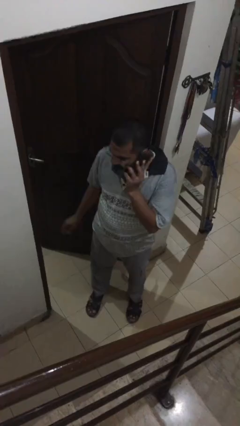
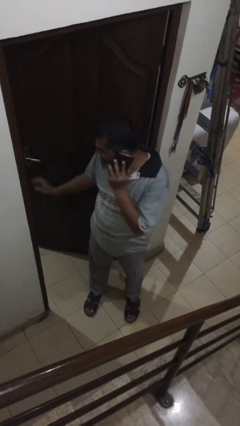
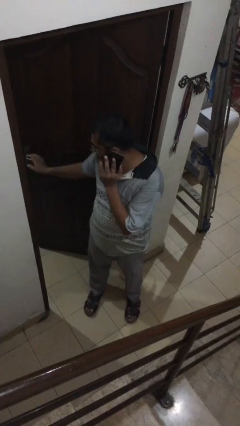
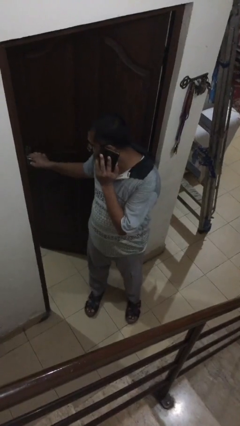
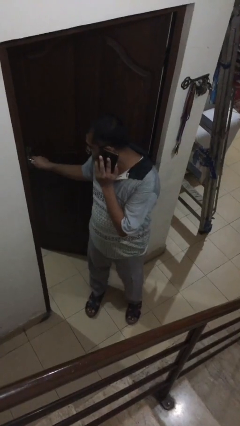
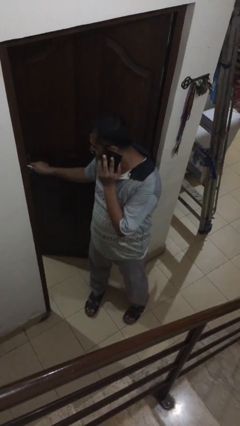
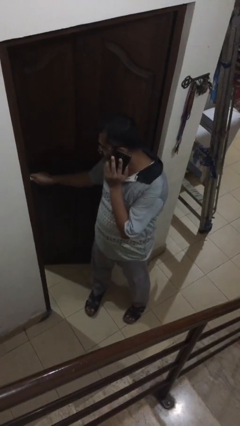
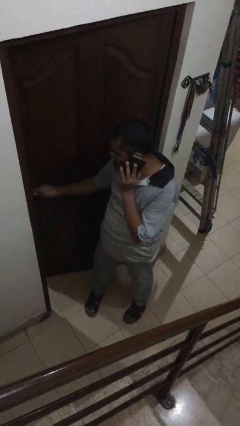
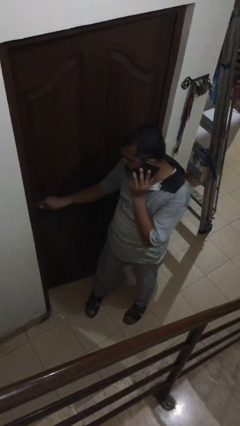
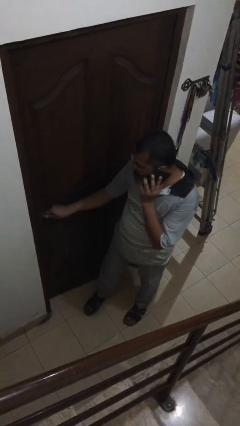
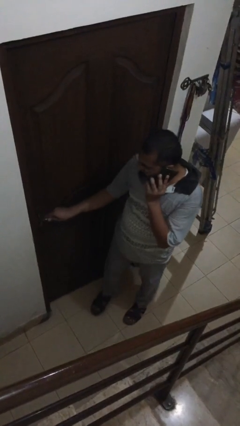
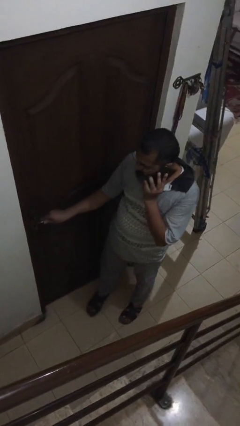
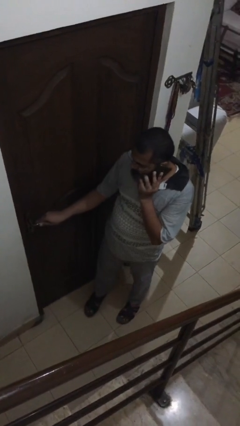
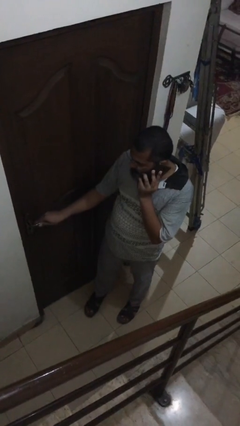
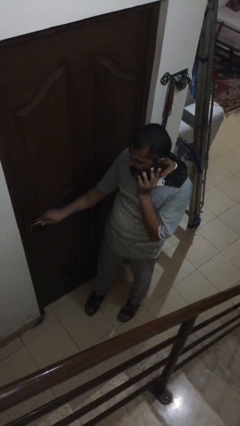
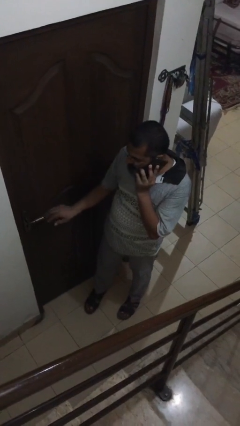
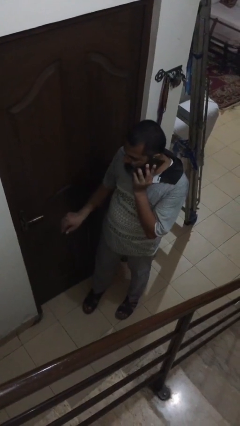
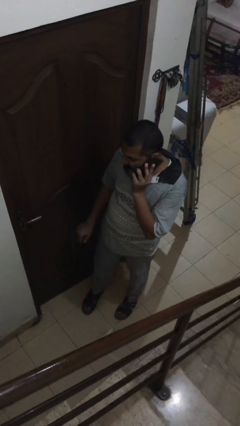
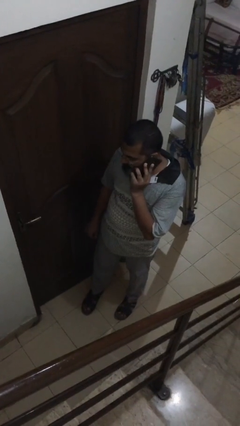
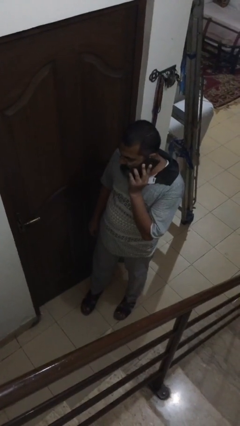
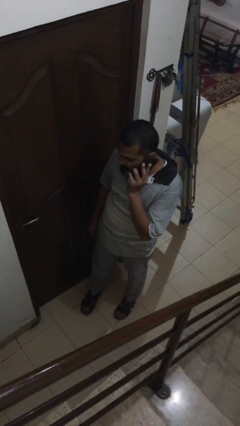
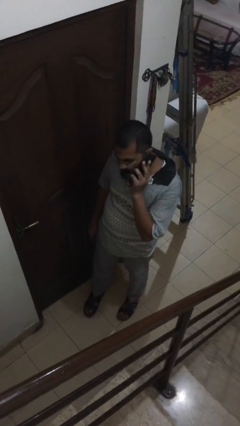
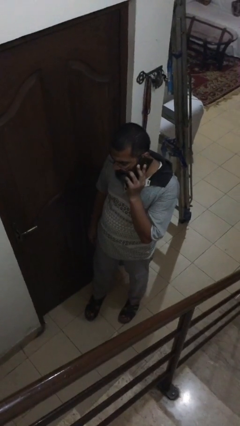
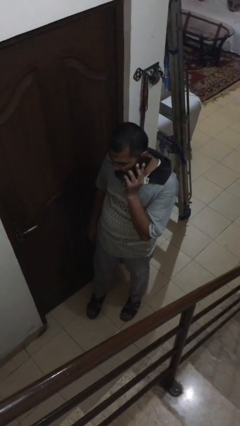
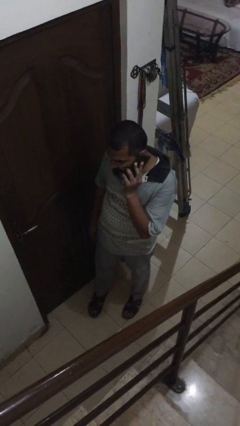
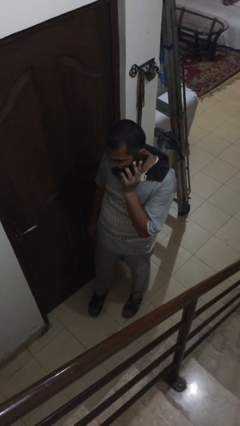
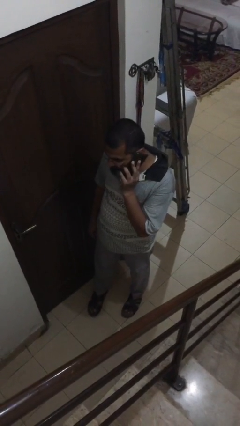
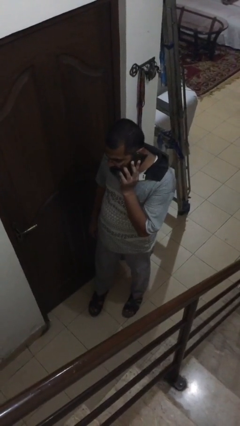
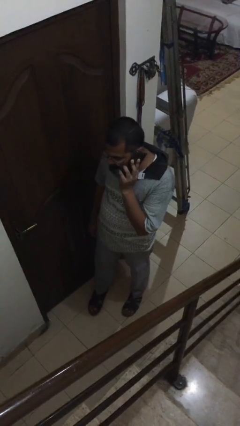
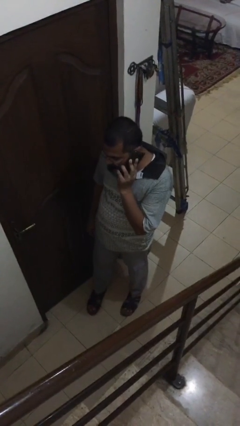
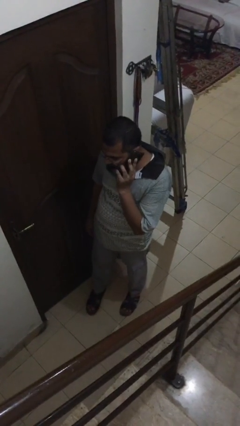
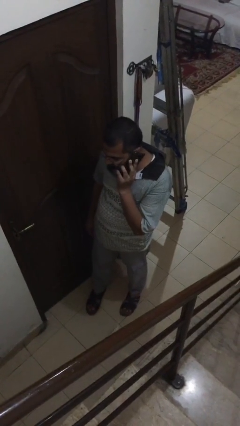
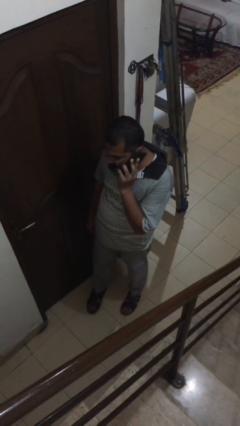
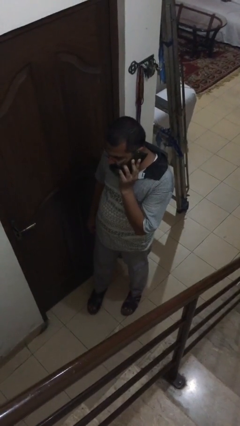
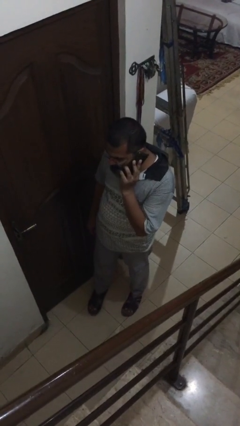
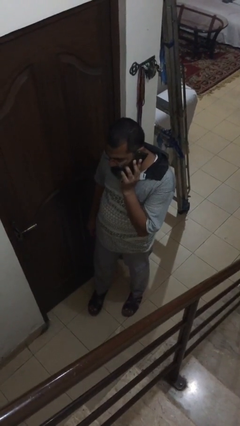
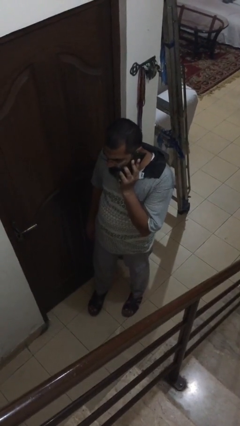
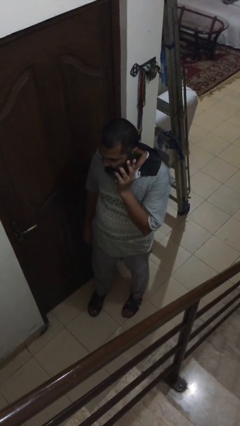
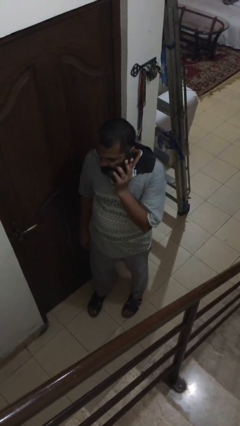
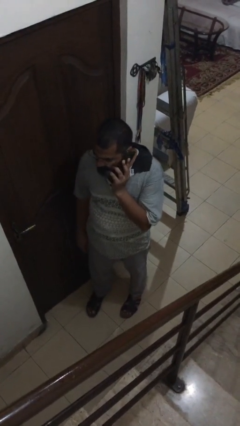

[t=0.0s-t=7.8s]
person closes facility door

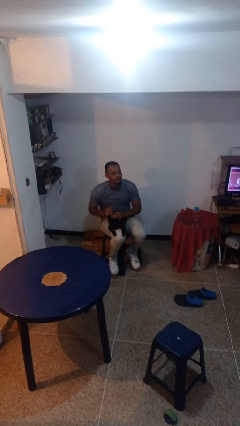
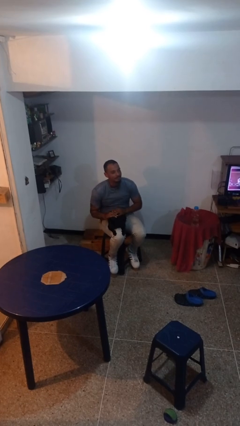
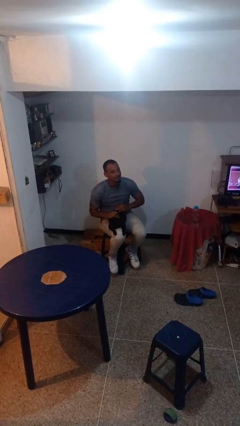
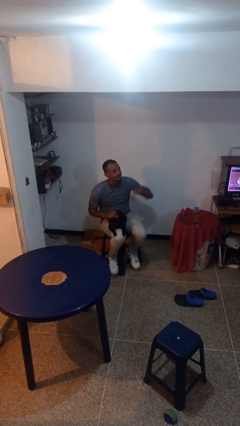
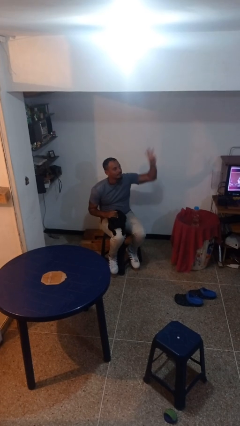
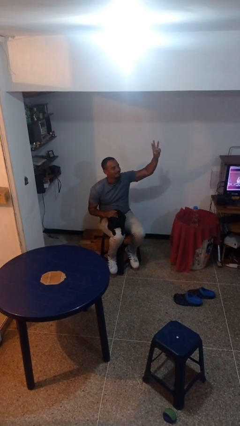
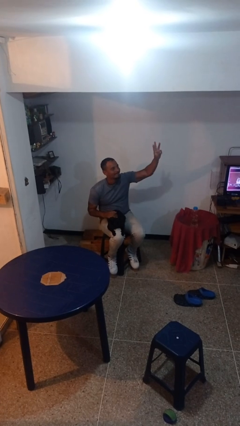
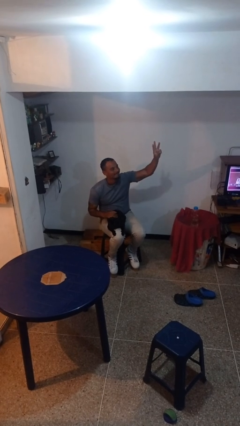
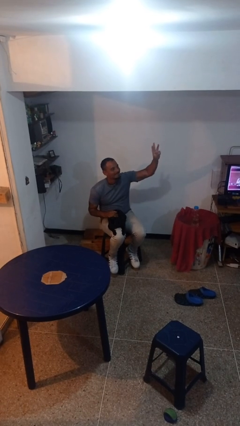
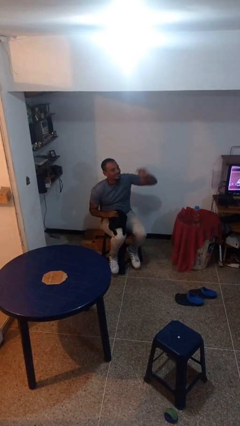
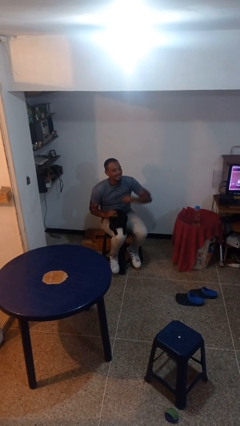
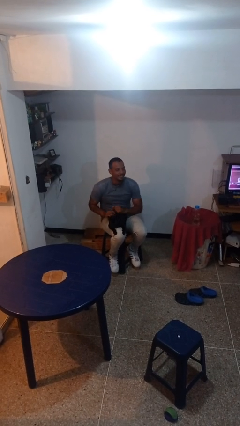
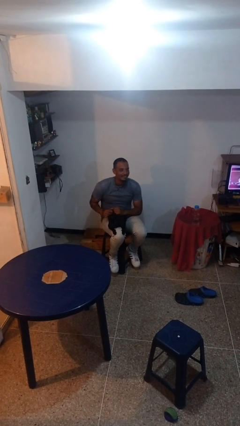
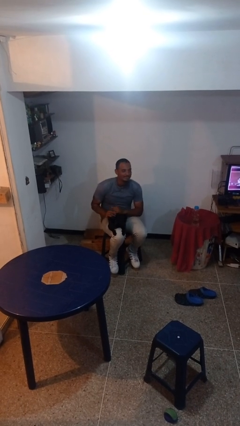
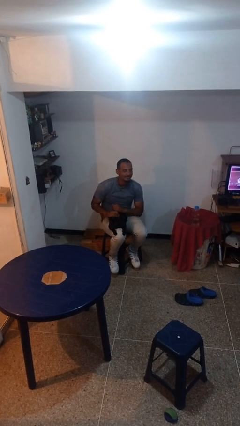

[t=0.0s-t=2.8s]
person gestures number three

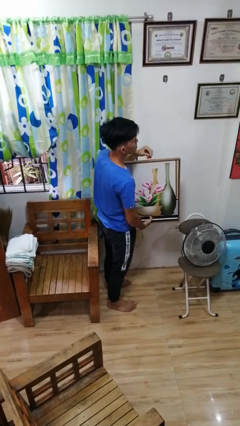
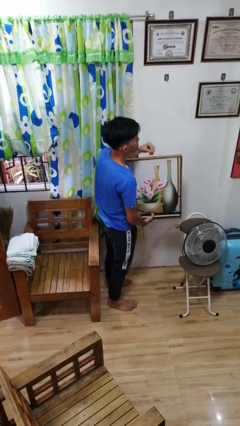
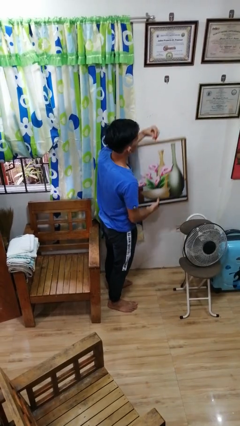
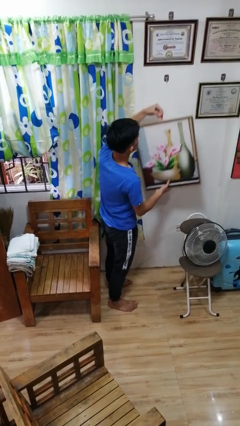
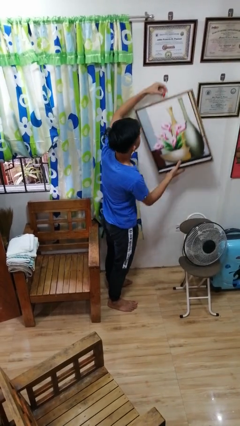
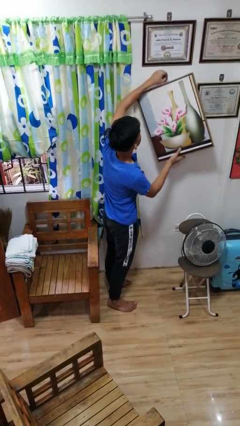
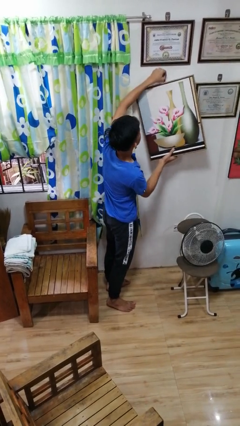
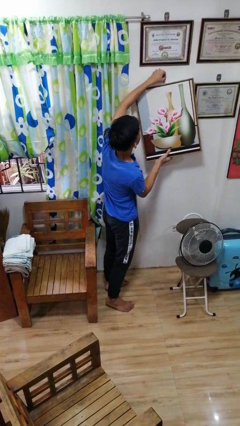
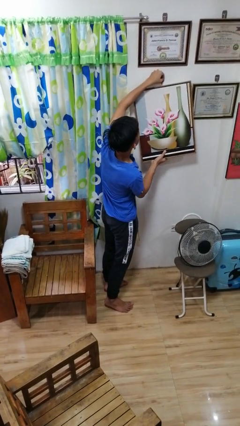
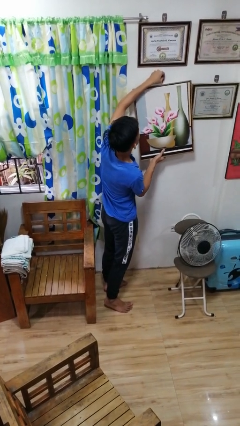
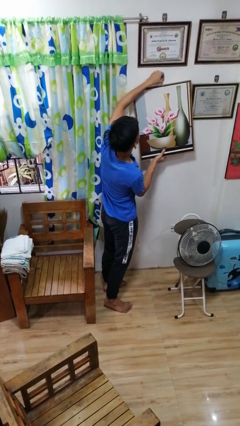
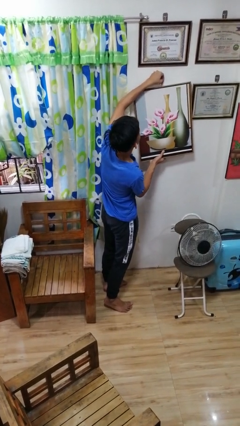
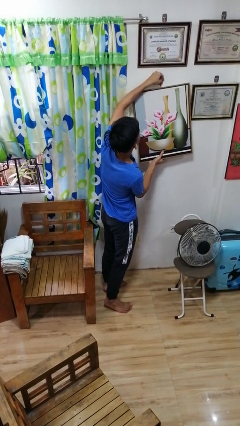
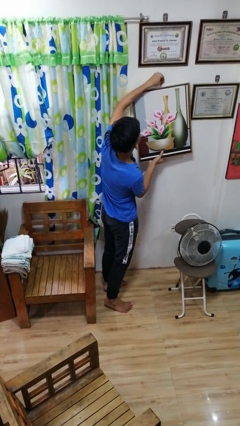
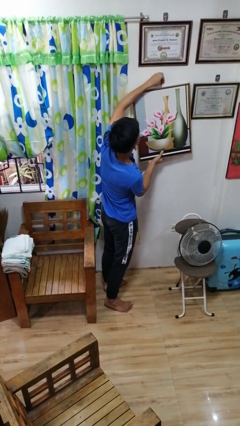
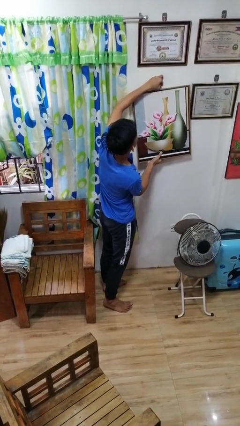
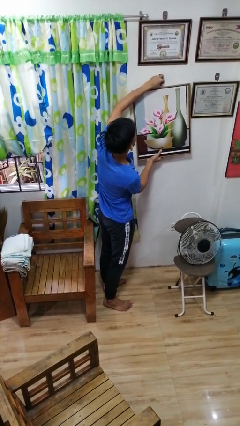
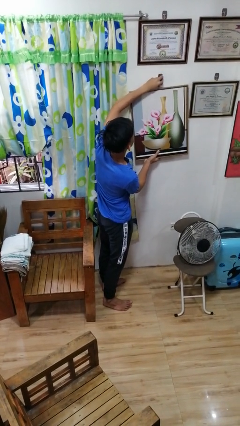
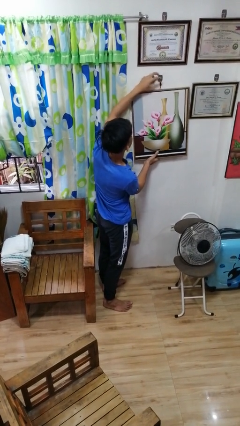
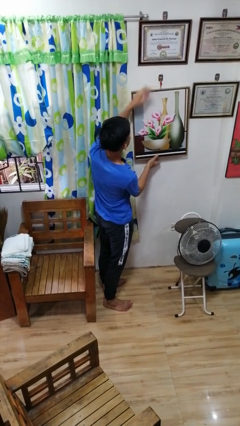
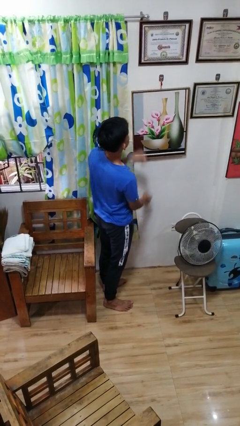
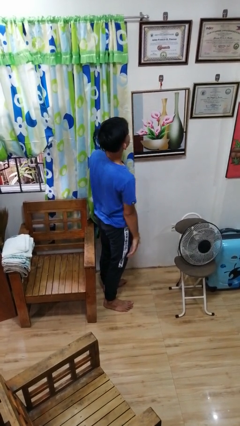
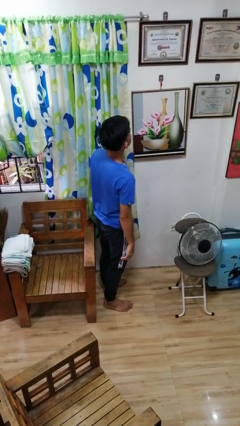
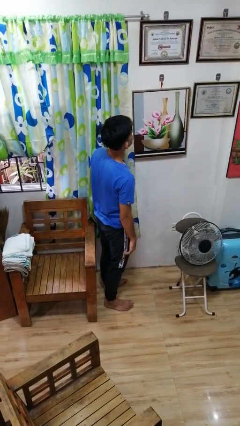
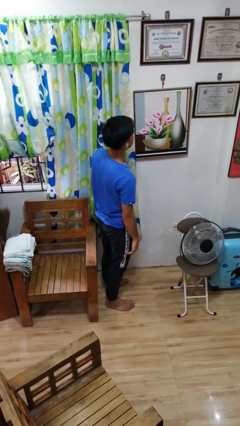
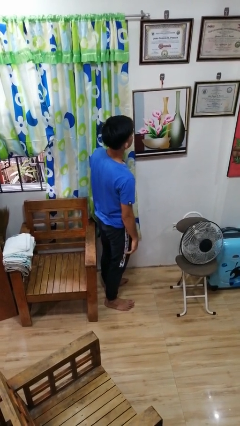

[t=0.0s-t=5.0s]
person puts up picture frame

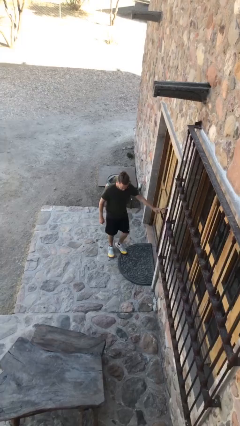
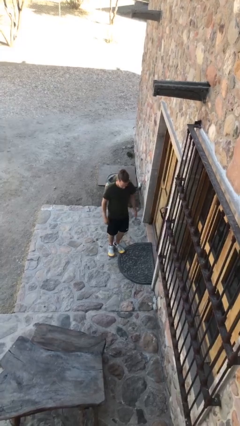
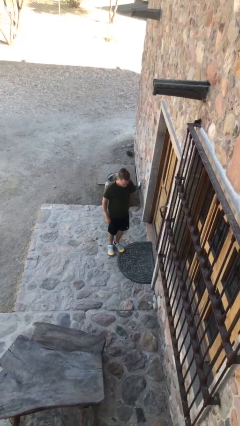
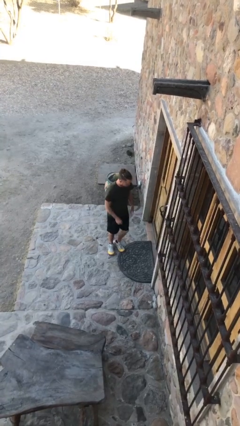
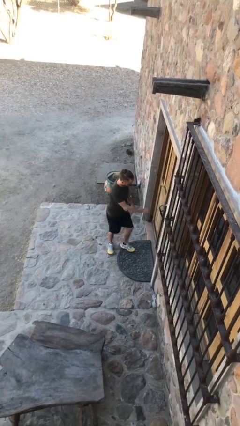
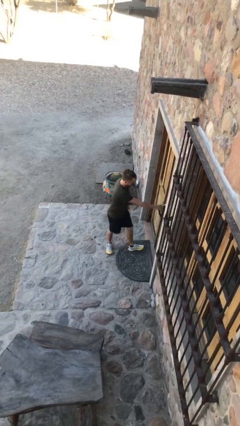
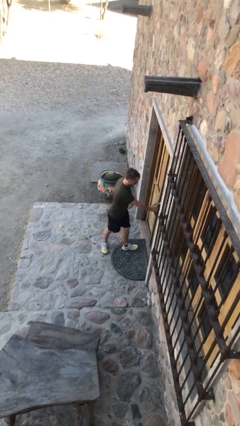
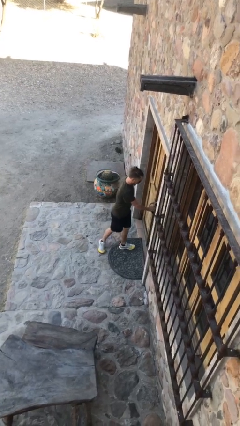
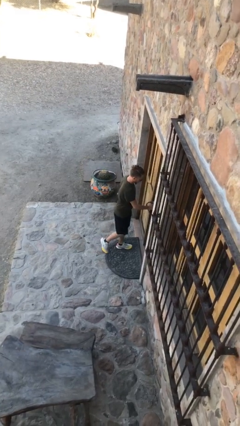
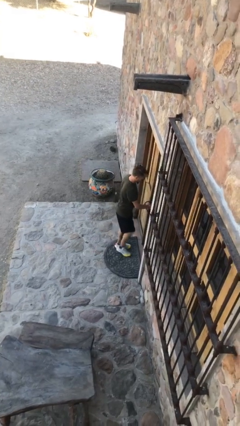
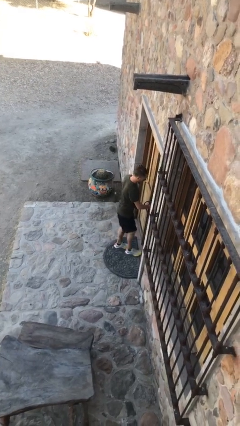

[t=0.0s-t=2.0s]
person opens facility door

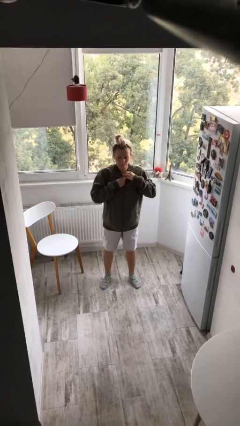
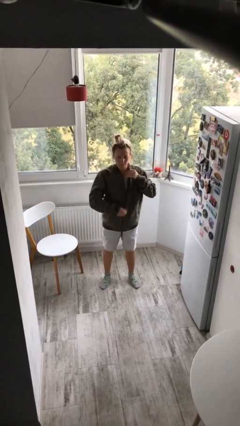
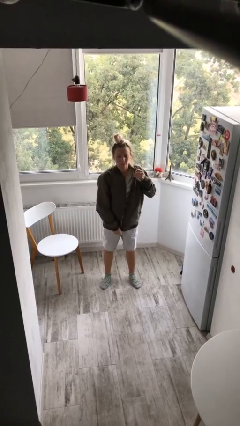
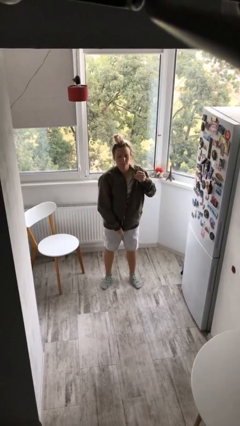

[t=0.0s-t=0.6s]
person unzips jacket
